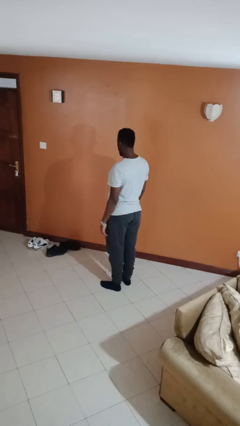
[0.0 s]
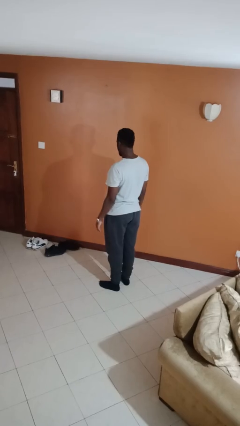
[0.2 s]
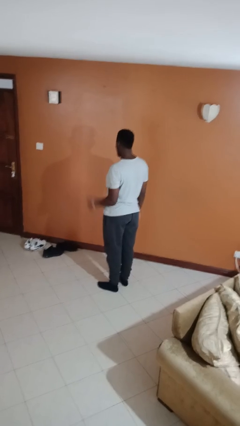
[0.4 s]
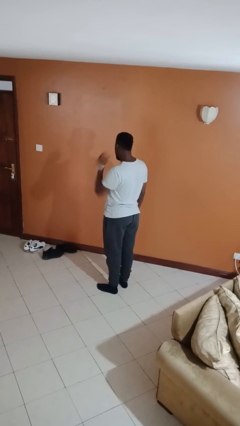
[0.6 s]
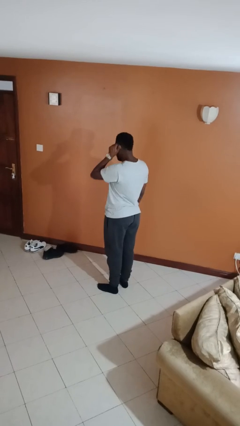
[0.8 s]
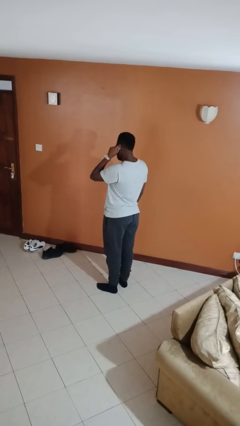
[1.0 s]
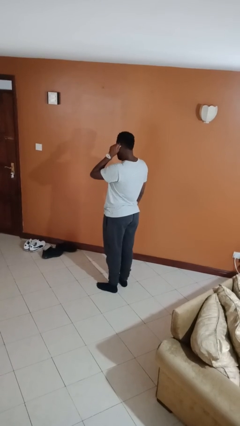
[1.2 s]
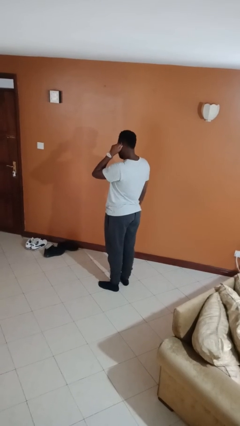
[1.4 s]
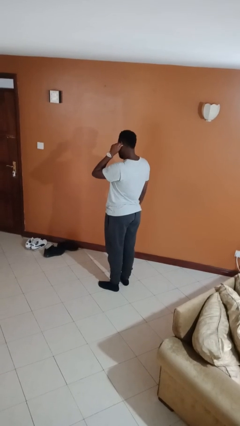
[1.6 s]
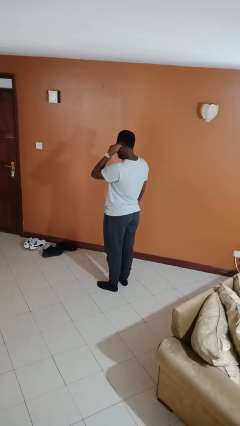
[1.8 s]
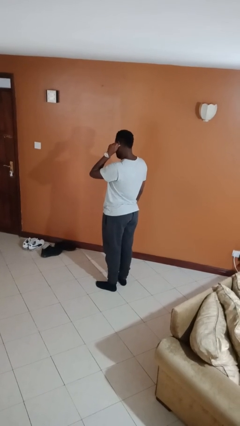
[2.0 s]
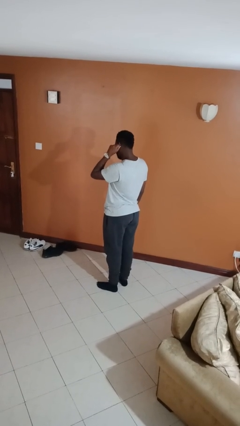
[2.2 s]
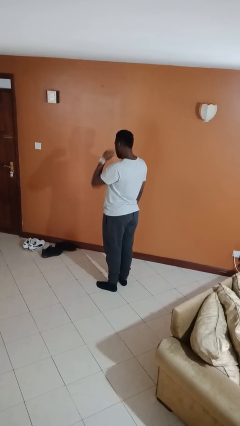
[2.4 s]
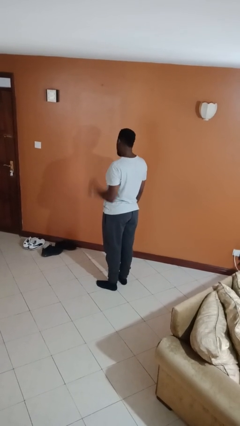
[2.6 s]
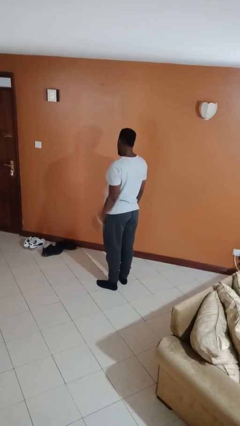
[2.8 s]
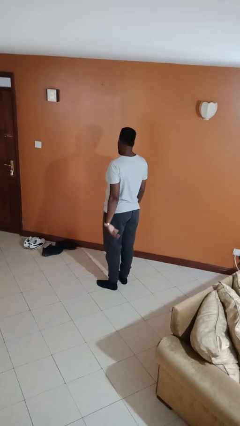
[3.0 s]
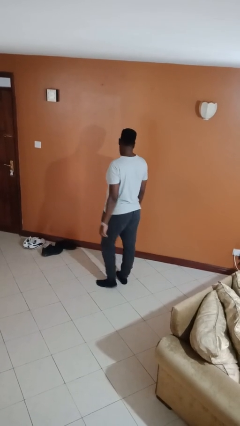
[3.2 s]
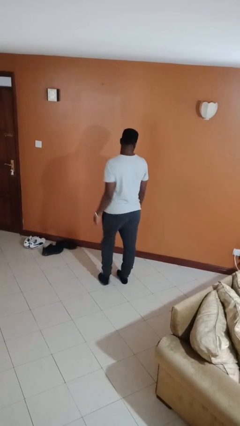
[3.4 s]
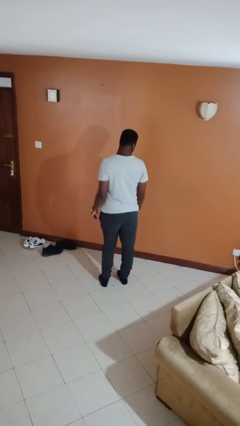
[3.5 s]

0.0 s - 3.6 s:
person touches earlobe

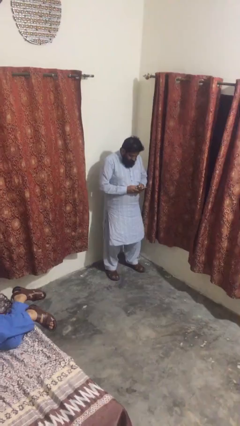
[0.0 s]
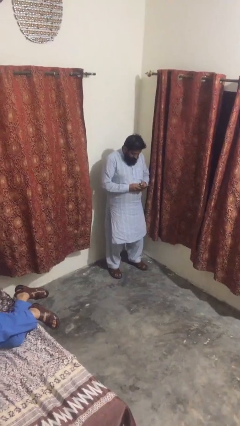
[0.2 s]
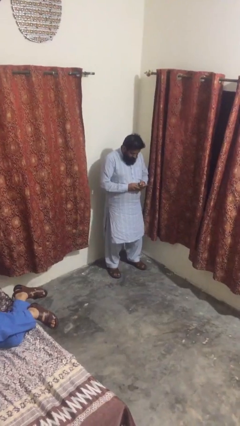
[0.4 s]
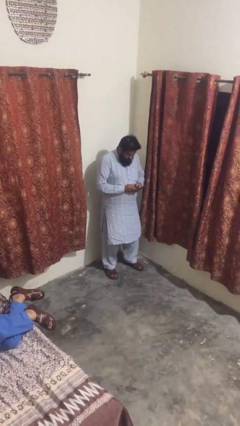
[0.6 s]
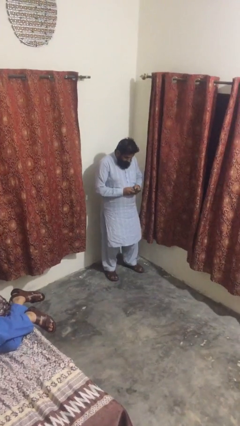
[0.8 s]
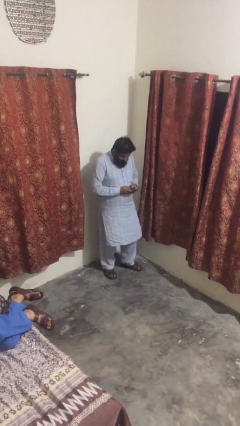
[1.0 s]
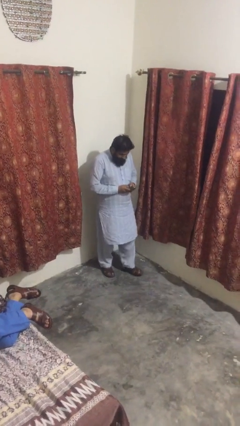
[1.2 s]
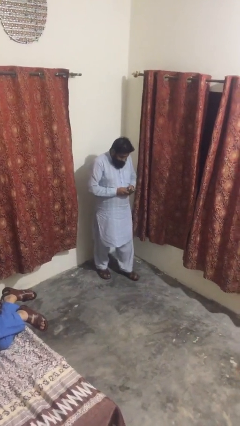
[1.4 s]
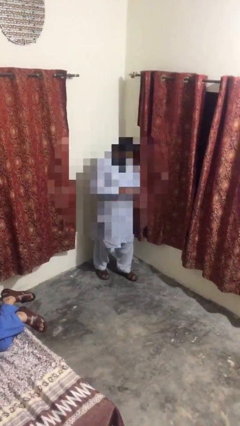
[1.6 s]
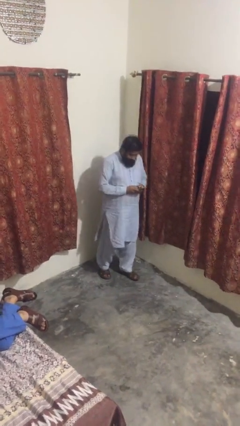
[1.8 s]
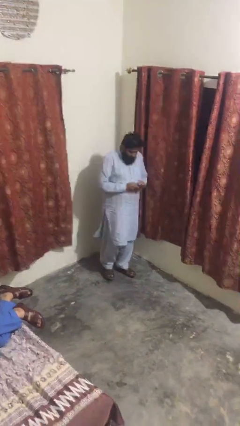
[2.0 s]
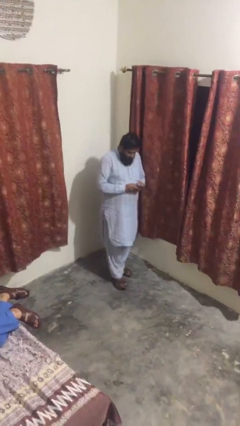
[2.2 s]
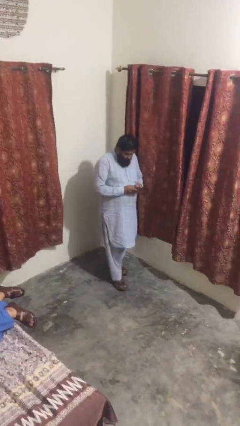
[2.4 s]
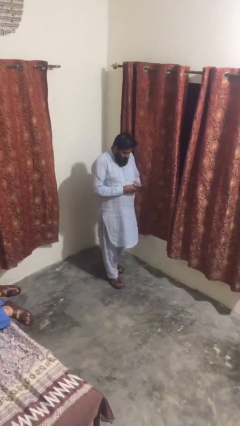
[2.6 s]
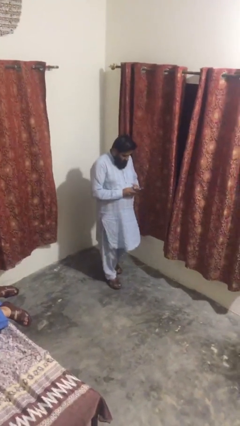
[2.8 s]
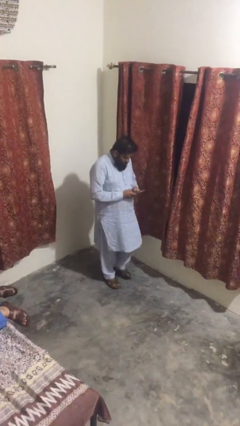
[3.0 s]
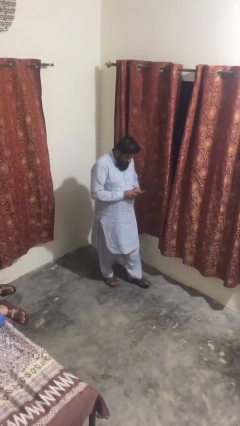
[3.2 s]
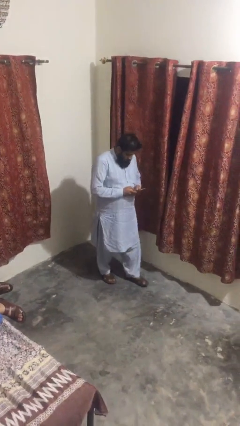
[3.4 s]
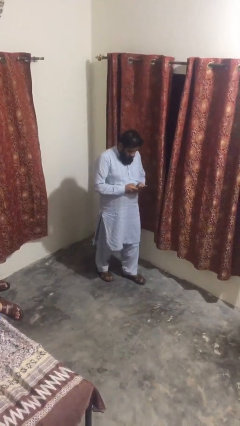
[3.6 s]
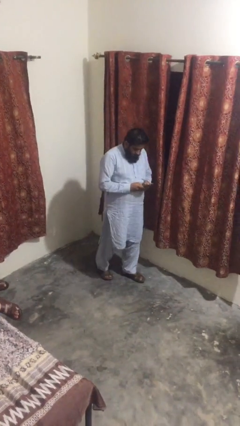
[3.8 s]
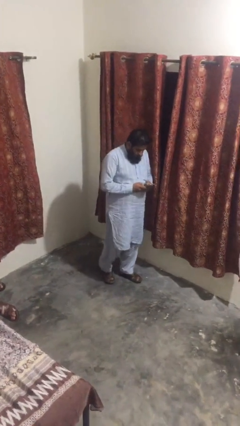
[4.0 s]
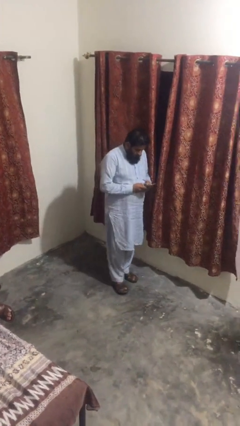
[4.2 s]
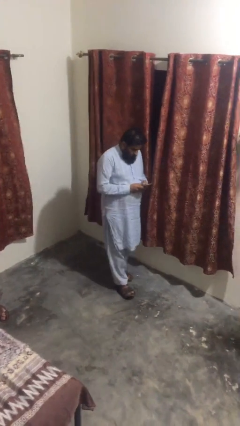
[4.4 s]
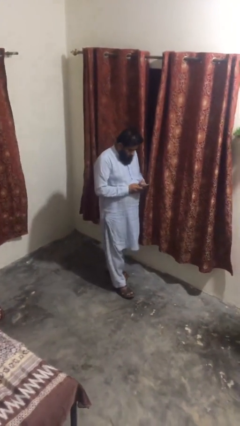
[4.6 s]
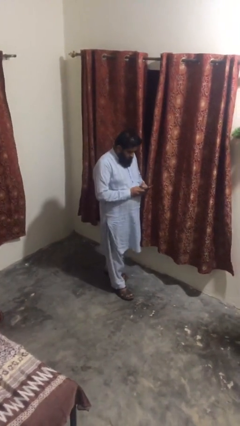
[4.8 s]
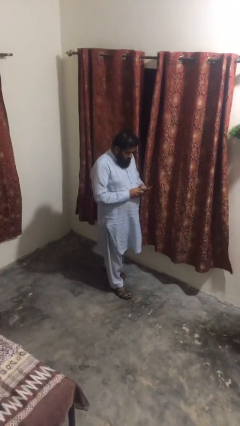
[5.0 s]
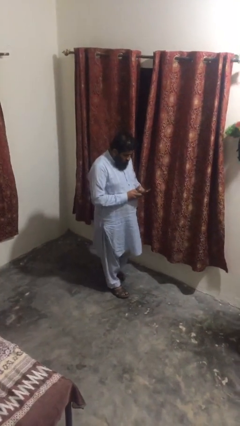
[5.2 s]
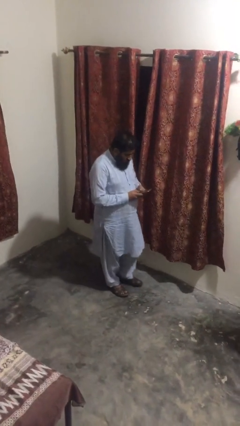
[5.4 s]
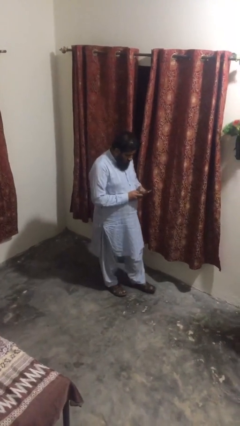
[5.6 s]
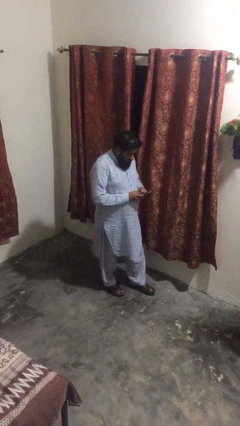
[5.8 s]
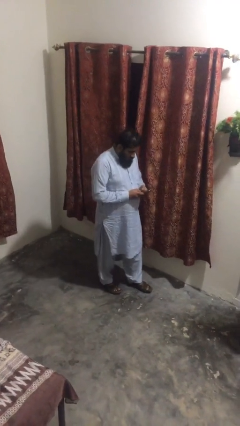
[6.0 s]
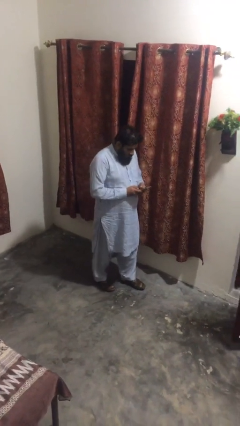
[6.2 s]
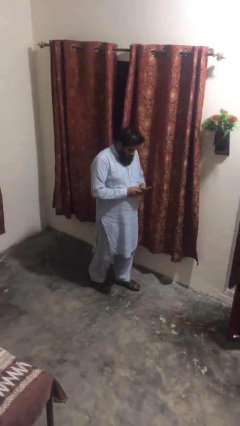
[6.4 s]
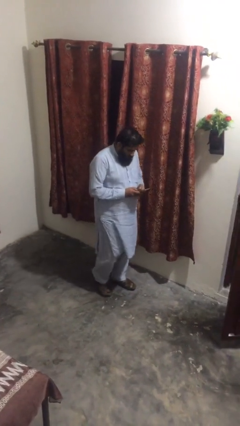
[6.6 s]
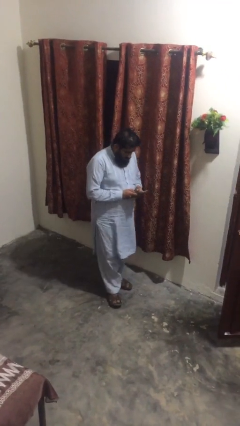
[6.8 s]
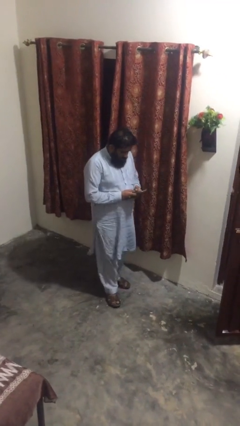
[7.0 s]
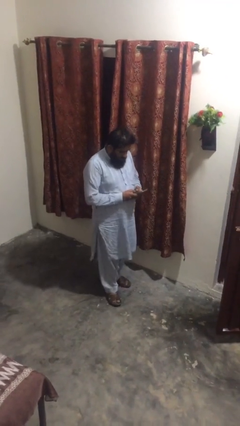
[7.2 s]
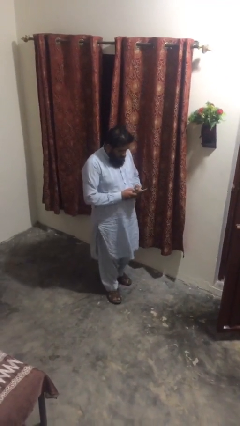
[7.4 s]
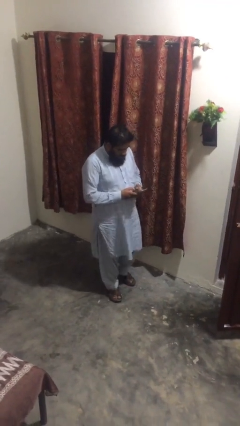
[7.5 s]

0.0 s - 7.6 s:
person texts on phone

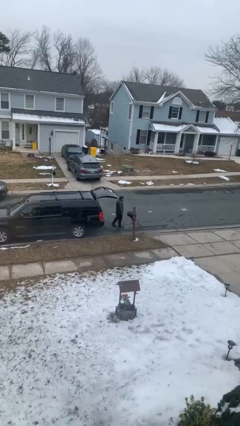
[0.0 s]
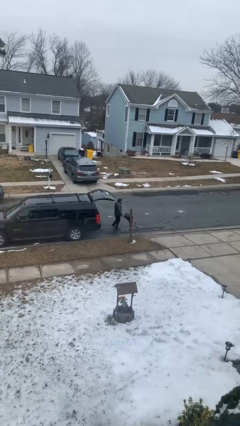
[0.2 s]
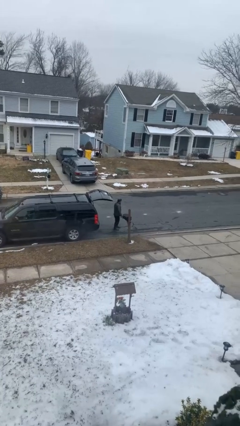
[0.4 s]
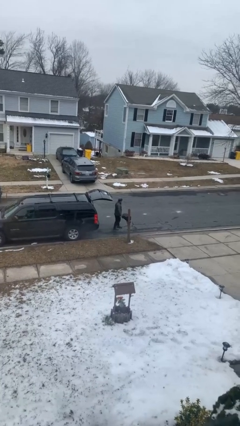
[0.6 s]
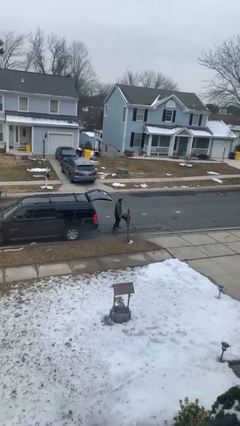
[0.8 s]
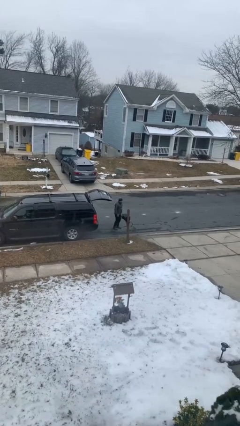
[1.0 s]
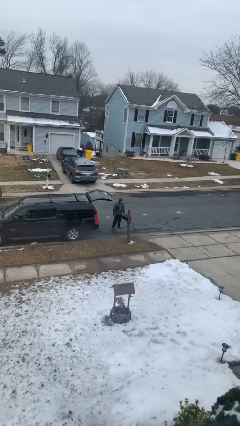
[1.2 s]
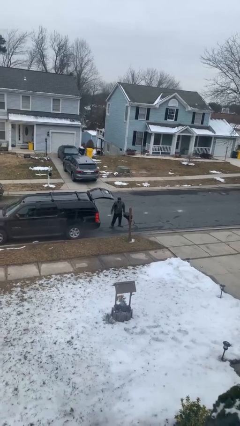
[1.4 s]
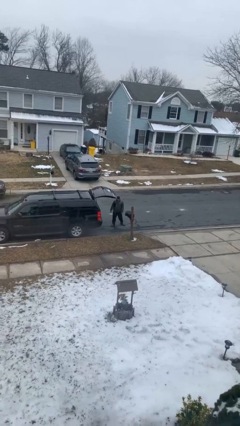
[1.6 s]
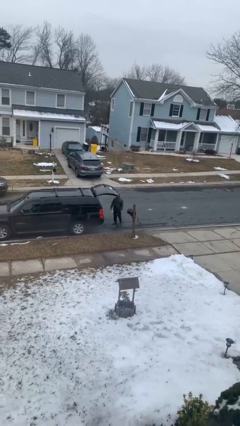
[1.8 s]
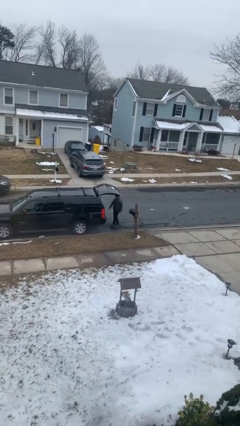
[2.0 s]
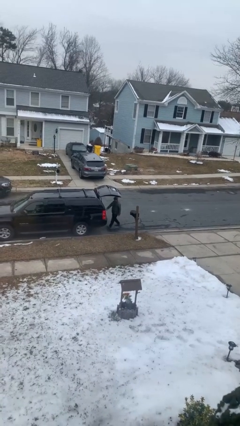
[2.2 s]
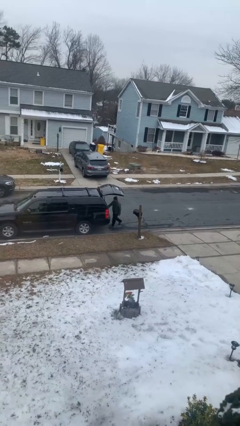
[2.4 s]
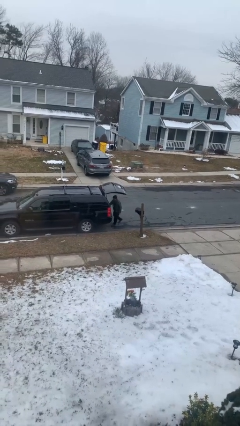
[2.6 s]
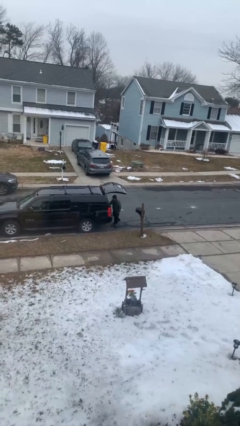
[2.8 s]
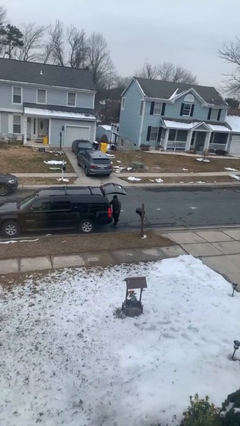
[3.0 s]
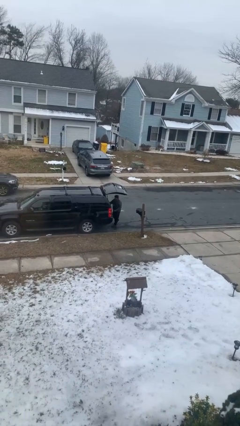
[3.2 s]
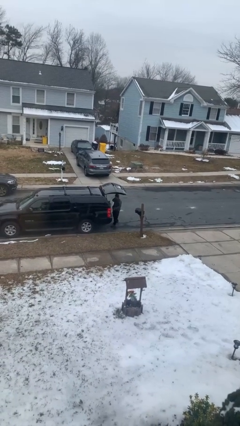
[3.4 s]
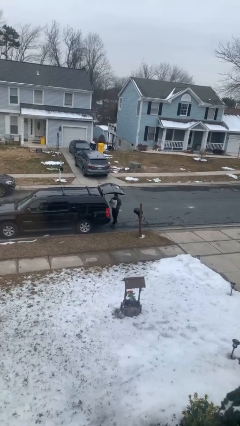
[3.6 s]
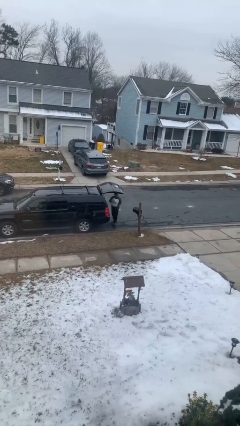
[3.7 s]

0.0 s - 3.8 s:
person unloads car

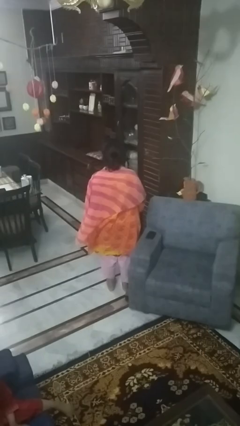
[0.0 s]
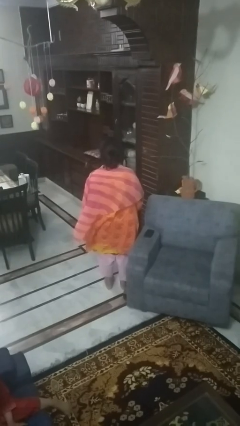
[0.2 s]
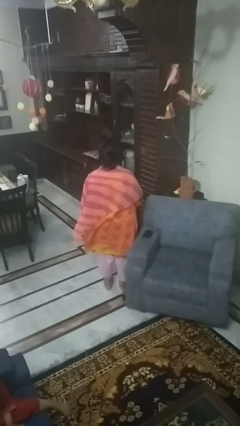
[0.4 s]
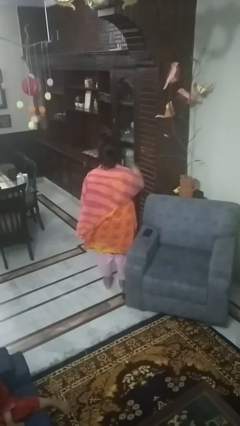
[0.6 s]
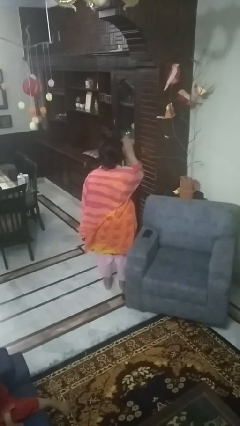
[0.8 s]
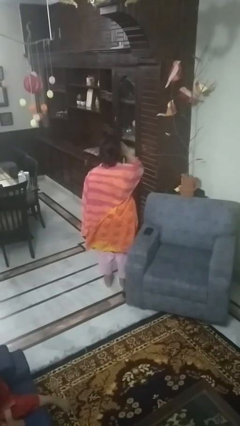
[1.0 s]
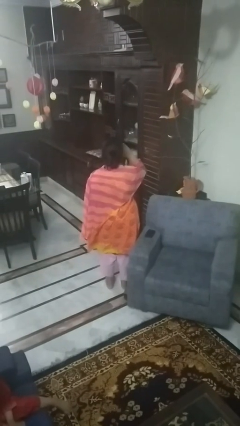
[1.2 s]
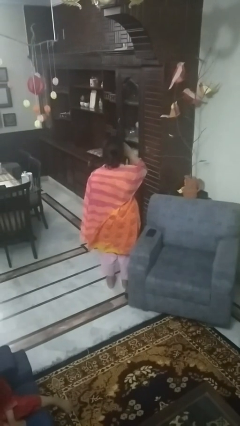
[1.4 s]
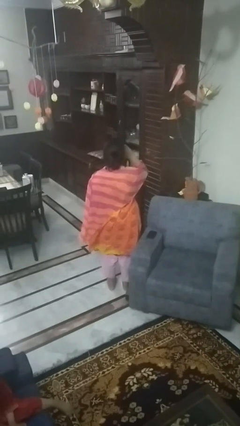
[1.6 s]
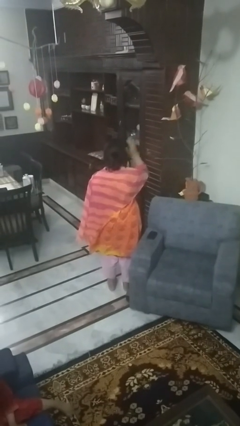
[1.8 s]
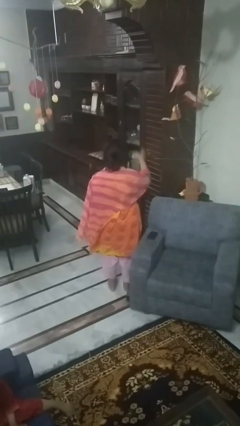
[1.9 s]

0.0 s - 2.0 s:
person salutes

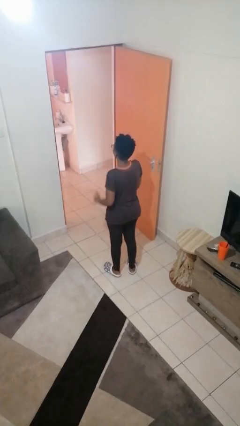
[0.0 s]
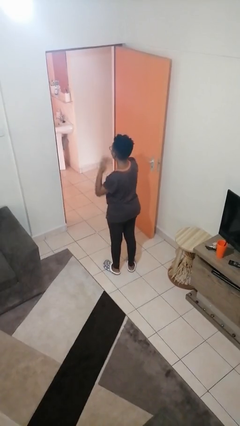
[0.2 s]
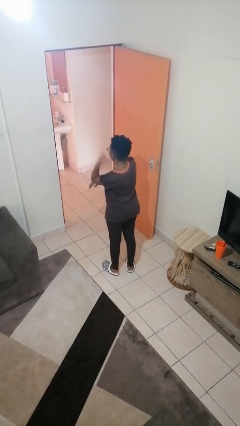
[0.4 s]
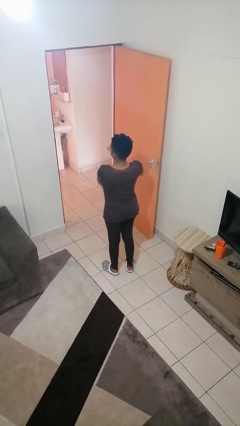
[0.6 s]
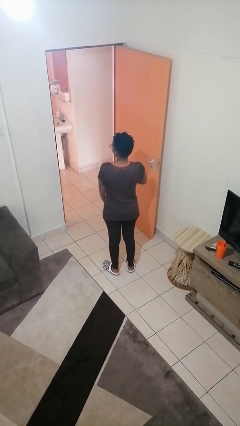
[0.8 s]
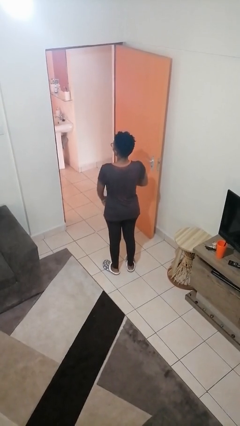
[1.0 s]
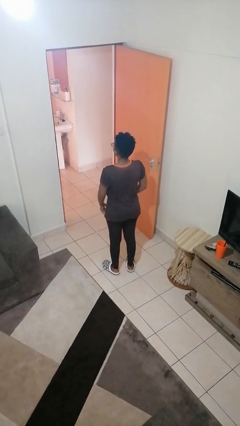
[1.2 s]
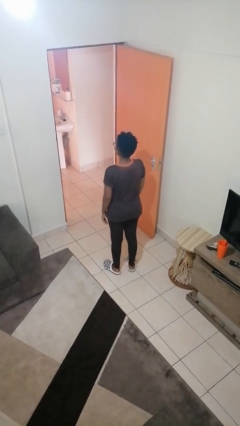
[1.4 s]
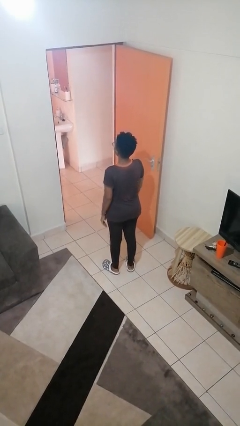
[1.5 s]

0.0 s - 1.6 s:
person karate chop
